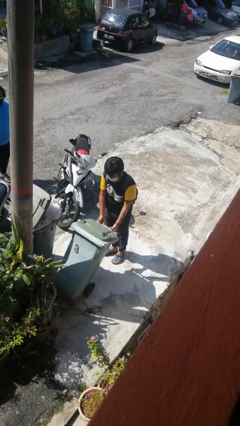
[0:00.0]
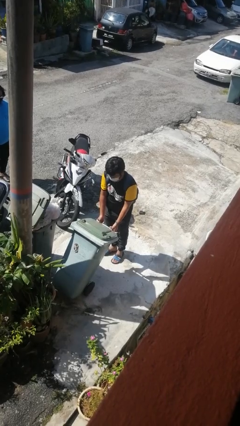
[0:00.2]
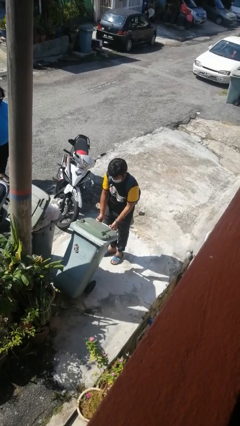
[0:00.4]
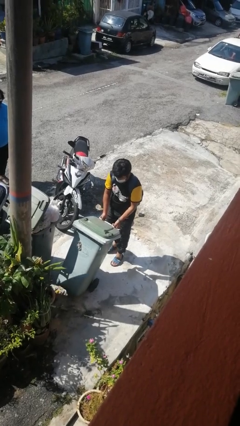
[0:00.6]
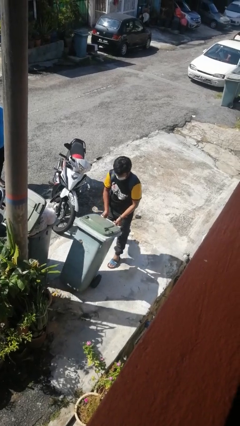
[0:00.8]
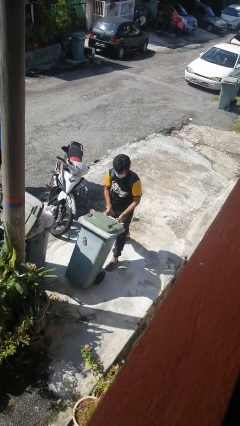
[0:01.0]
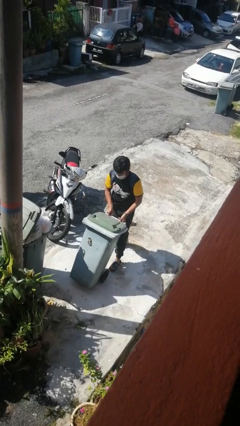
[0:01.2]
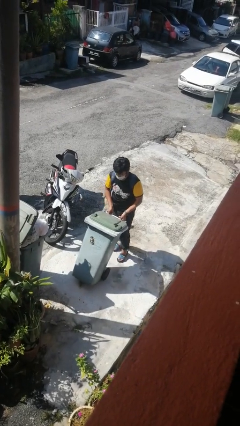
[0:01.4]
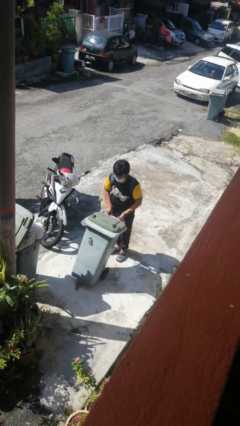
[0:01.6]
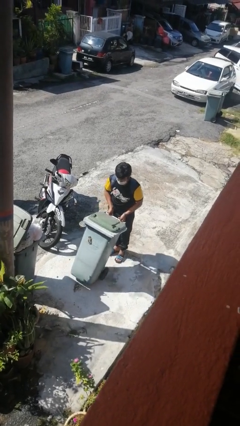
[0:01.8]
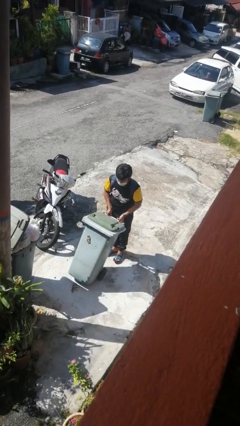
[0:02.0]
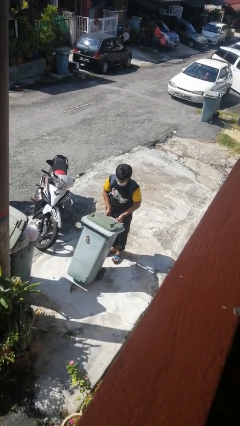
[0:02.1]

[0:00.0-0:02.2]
person pulls wheeled trashcan

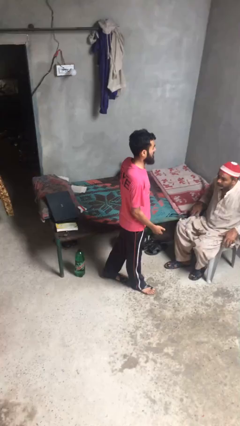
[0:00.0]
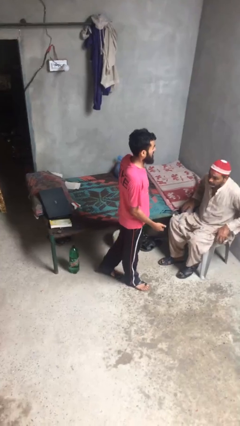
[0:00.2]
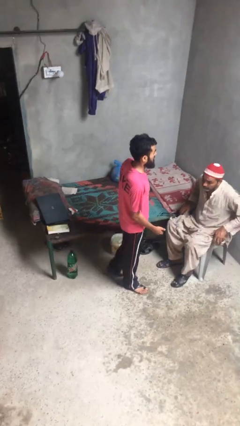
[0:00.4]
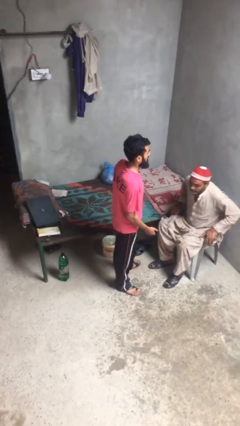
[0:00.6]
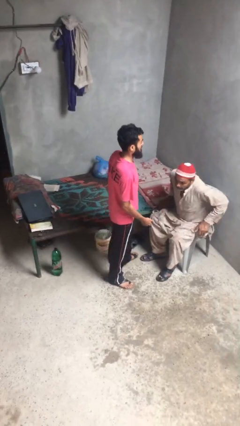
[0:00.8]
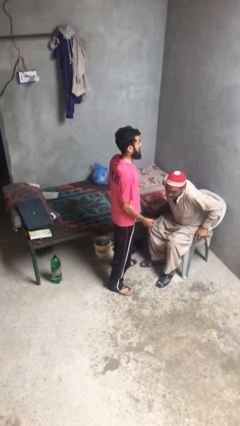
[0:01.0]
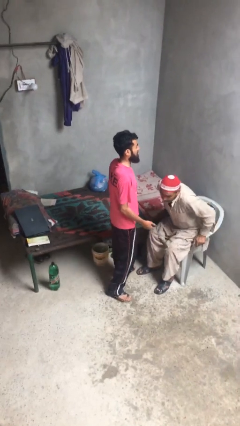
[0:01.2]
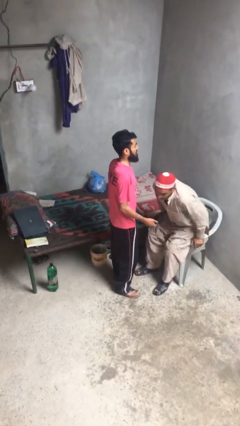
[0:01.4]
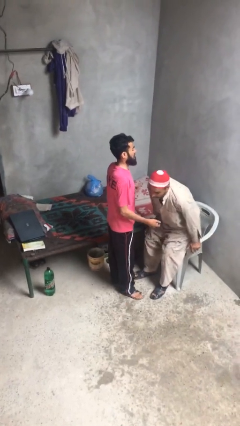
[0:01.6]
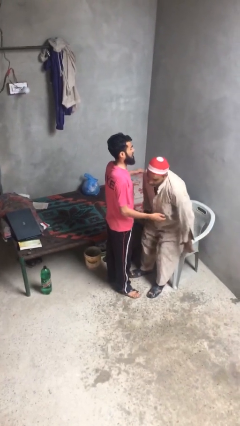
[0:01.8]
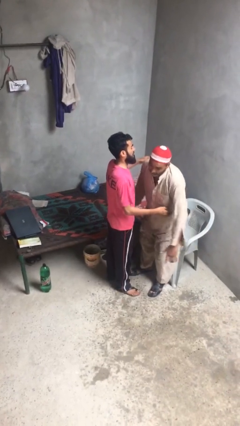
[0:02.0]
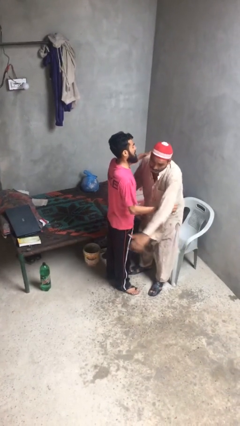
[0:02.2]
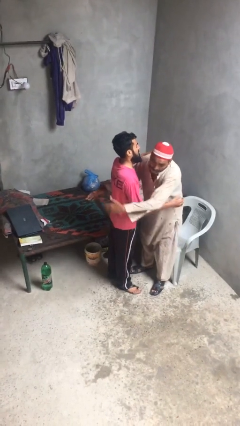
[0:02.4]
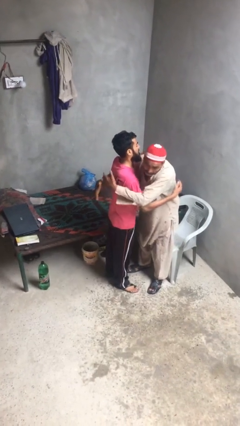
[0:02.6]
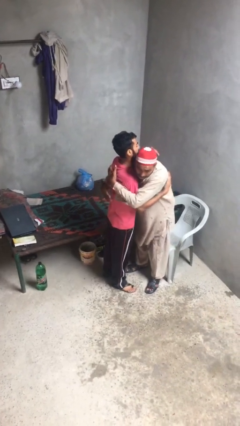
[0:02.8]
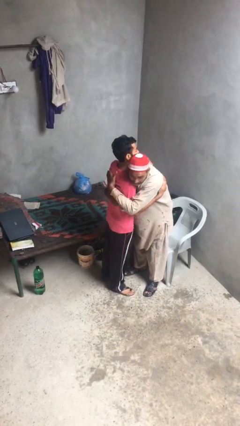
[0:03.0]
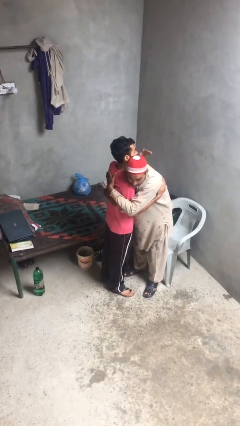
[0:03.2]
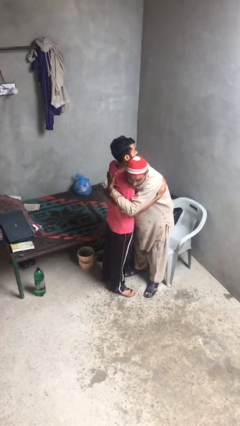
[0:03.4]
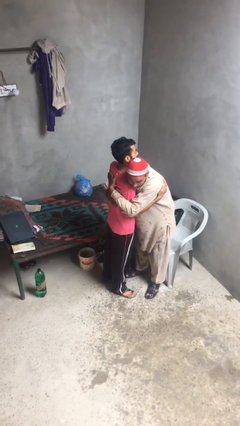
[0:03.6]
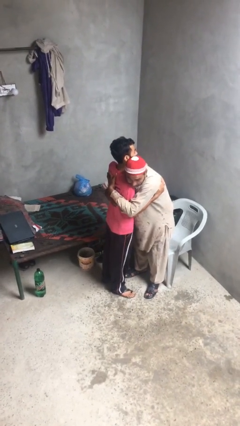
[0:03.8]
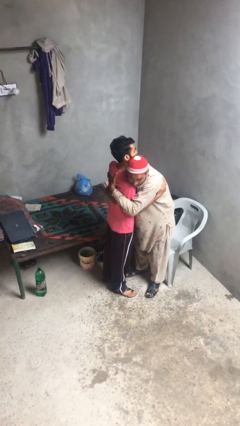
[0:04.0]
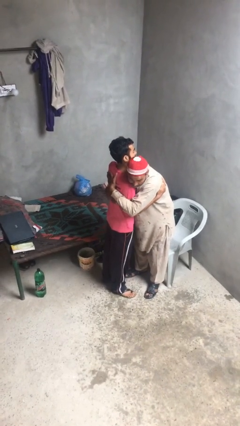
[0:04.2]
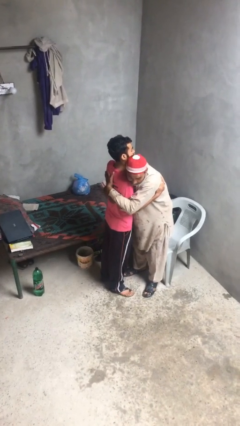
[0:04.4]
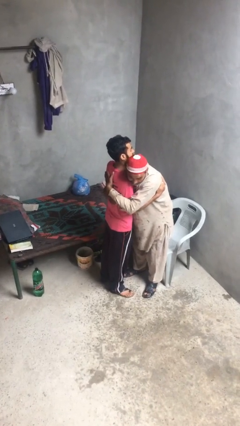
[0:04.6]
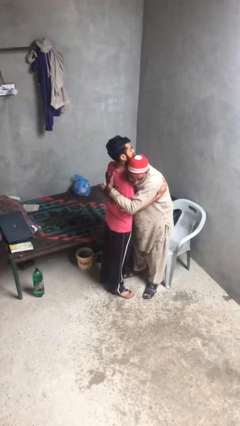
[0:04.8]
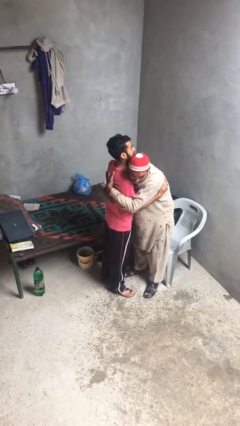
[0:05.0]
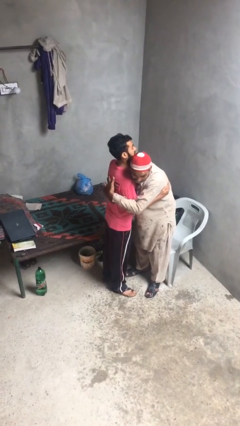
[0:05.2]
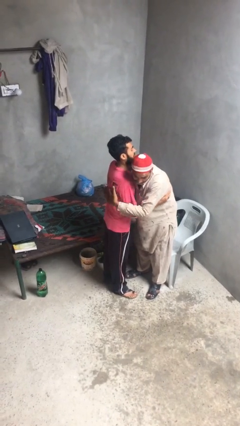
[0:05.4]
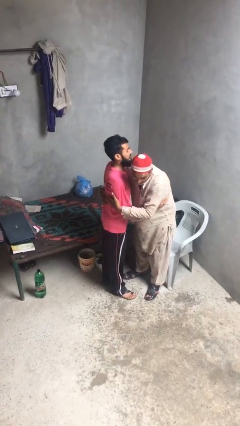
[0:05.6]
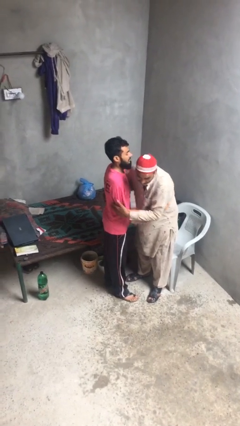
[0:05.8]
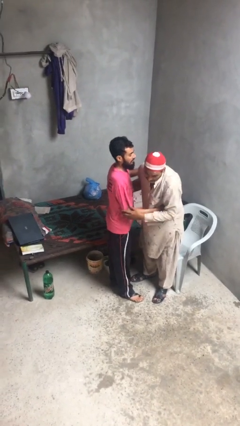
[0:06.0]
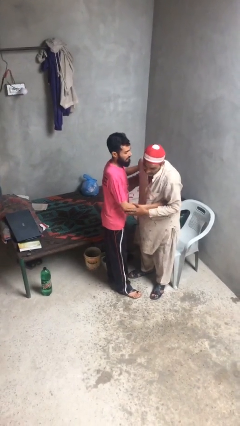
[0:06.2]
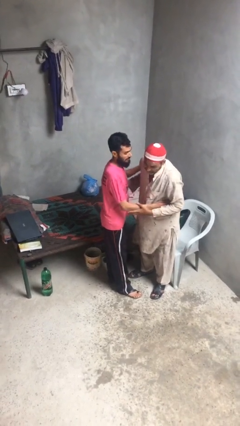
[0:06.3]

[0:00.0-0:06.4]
person embraces person

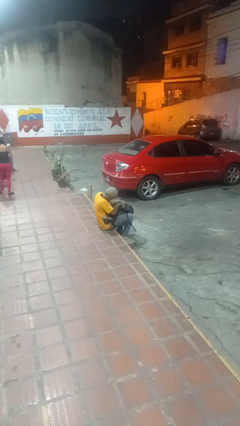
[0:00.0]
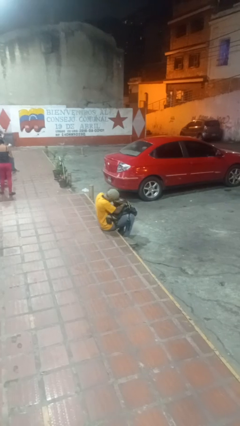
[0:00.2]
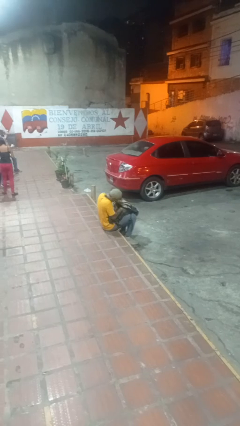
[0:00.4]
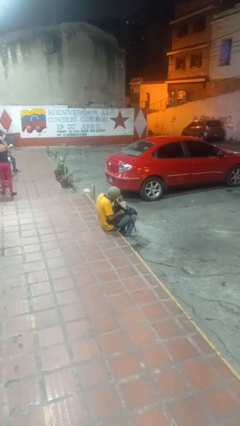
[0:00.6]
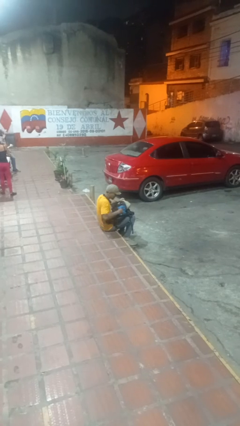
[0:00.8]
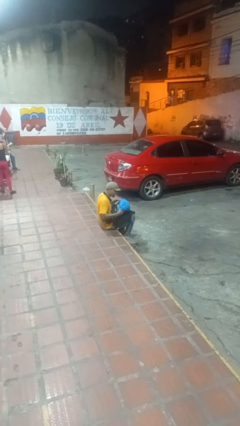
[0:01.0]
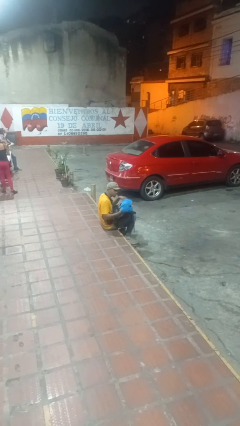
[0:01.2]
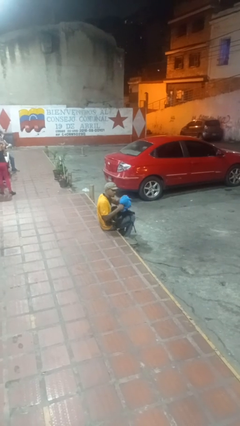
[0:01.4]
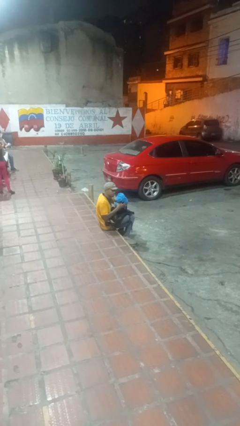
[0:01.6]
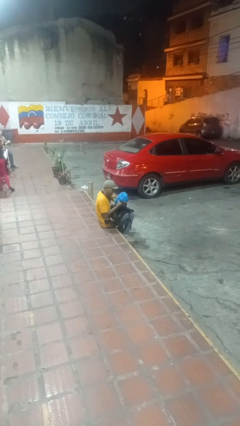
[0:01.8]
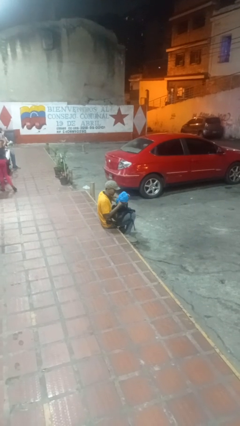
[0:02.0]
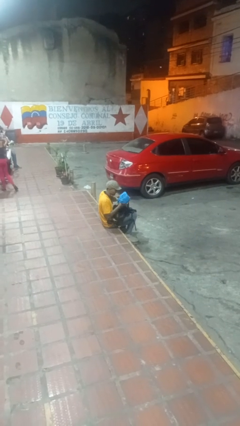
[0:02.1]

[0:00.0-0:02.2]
person takes object from backpack

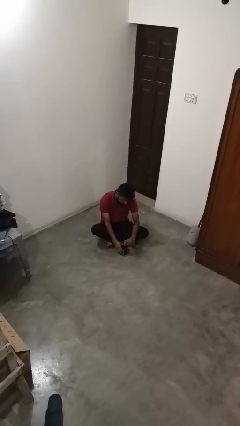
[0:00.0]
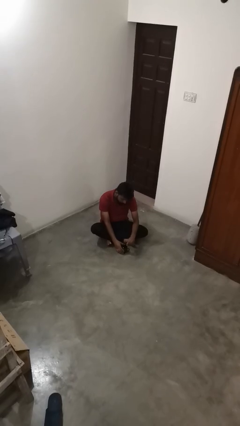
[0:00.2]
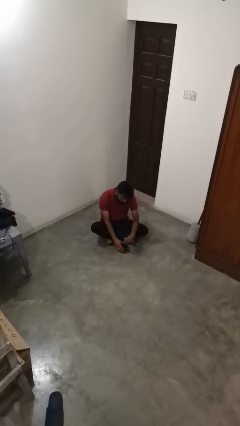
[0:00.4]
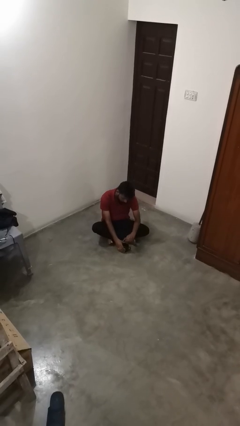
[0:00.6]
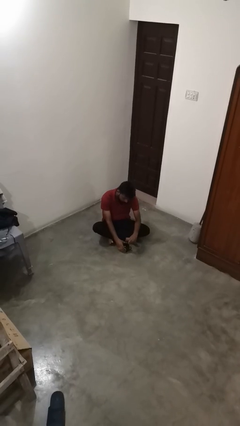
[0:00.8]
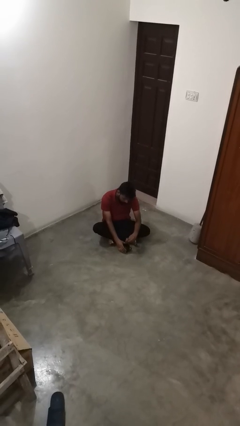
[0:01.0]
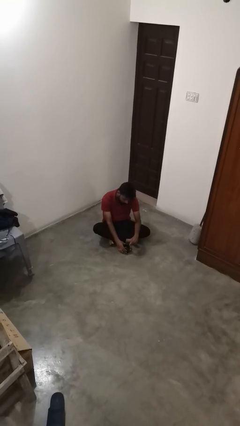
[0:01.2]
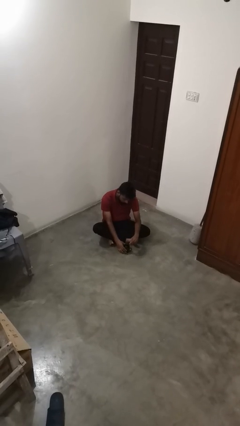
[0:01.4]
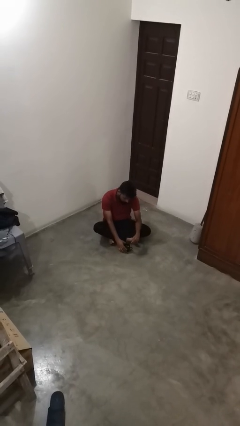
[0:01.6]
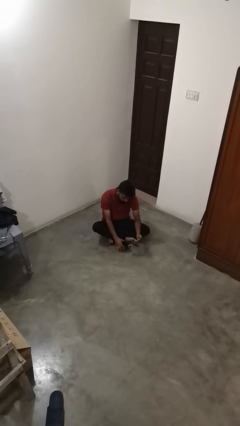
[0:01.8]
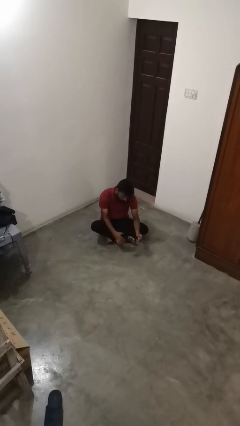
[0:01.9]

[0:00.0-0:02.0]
person stirs mug

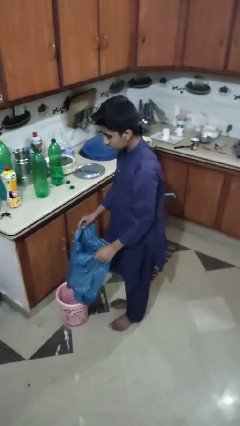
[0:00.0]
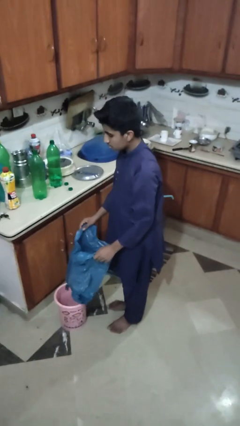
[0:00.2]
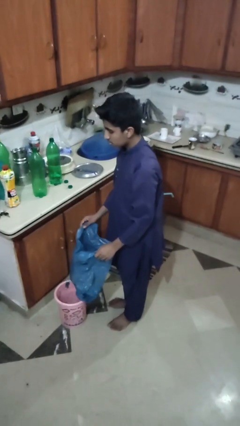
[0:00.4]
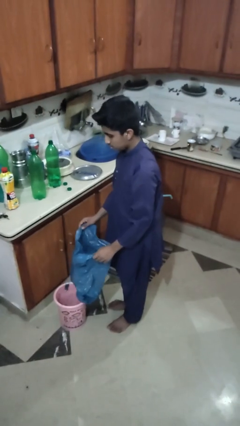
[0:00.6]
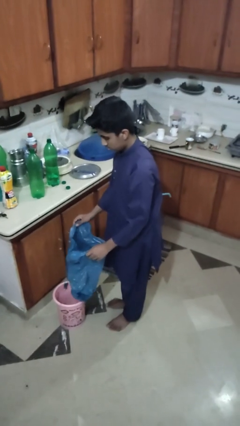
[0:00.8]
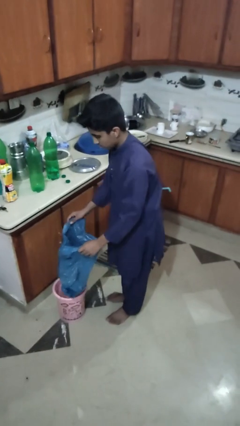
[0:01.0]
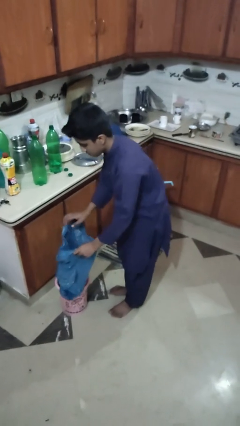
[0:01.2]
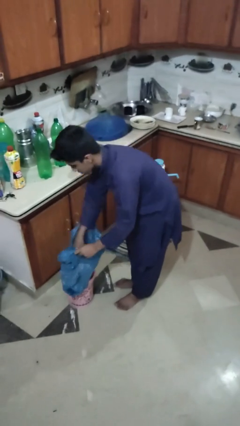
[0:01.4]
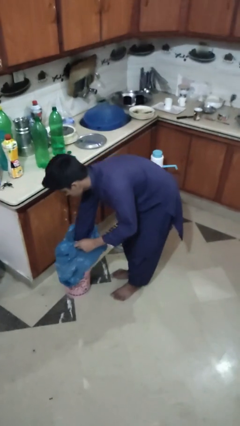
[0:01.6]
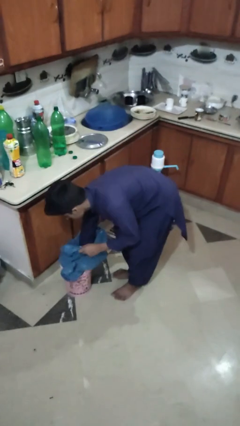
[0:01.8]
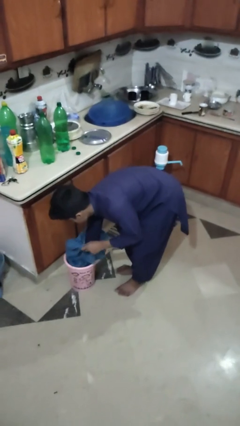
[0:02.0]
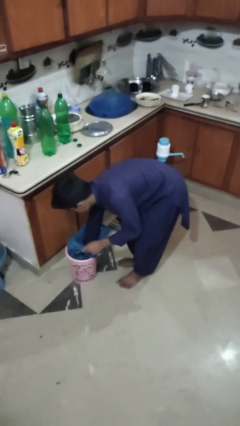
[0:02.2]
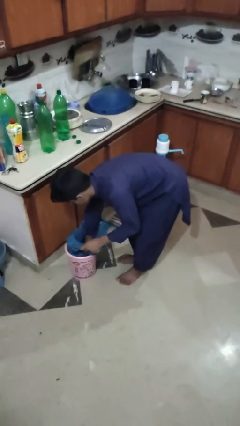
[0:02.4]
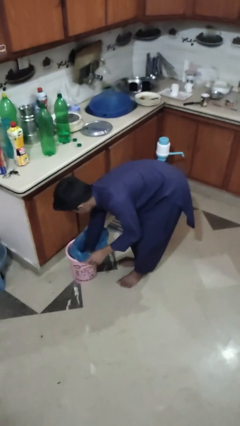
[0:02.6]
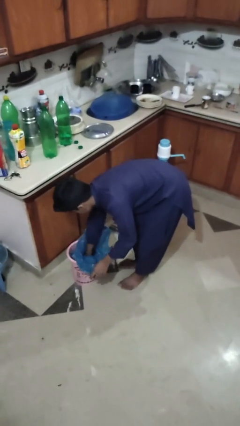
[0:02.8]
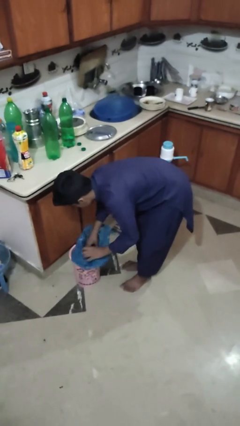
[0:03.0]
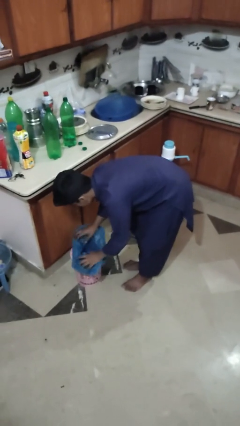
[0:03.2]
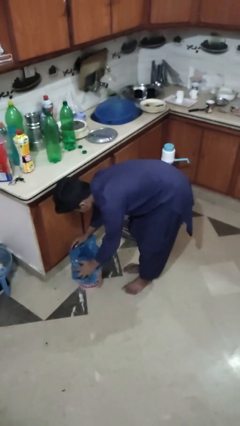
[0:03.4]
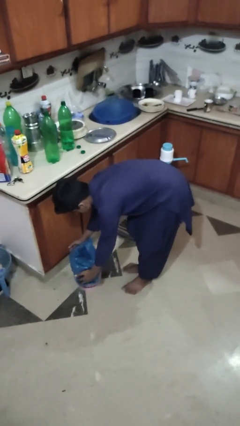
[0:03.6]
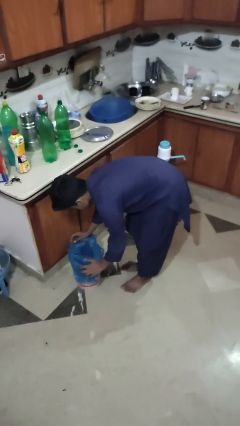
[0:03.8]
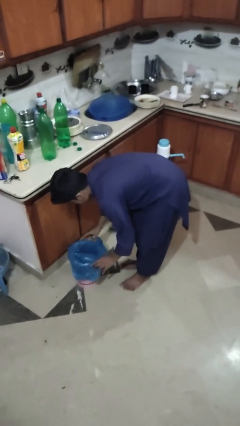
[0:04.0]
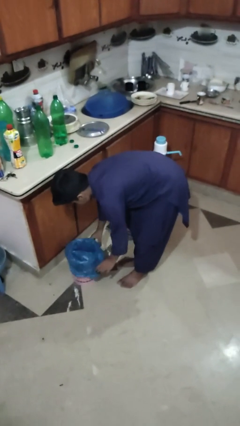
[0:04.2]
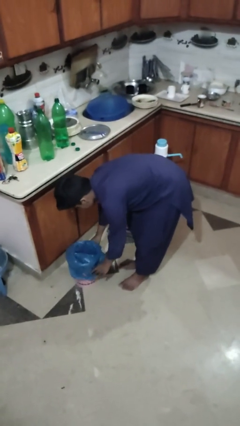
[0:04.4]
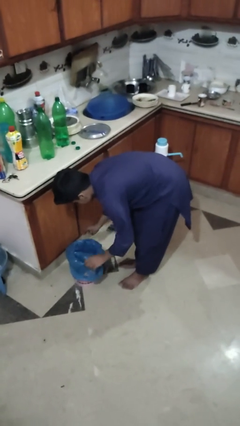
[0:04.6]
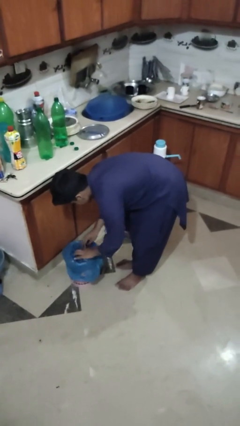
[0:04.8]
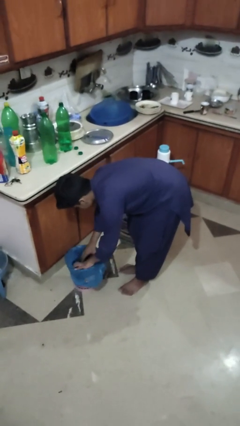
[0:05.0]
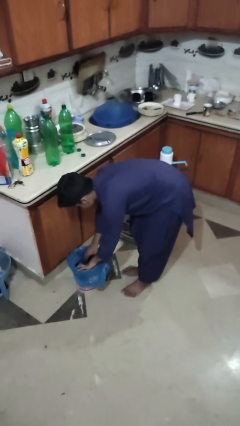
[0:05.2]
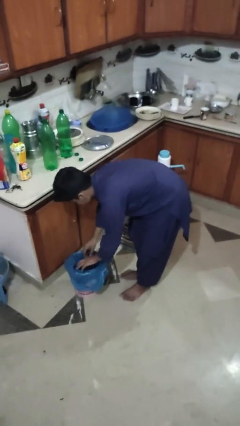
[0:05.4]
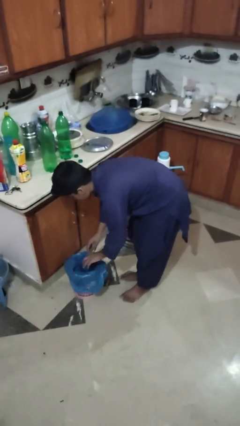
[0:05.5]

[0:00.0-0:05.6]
person inserts trashbag into trashcan
